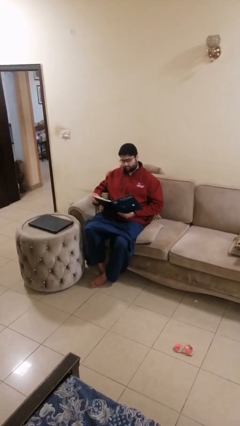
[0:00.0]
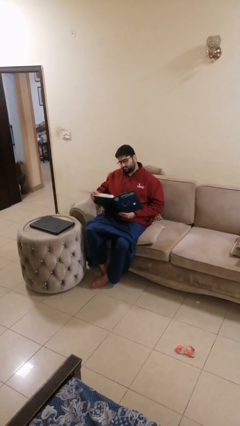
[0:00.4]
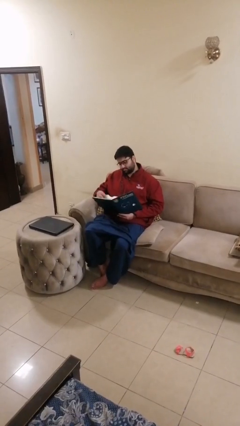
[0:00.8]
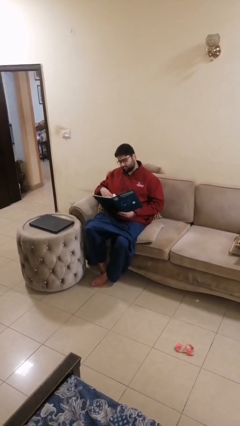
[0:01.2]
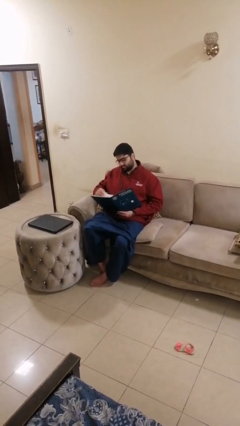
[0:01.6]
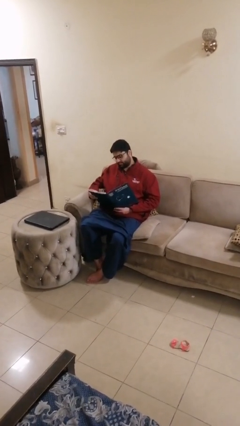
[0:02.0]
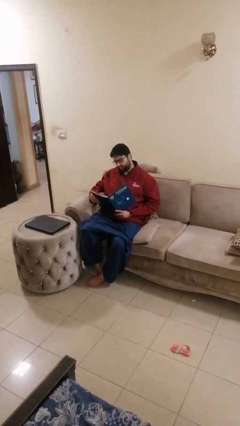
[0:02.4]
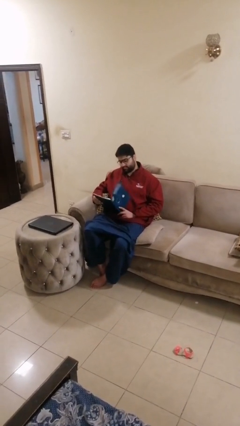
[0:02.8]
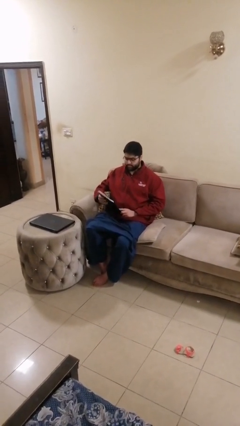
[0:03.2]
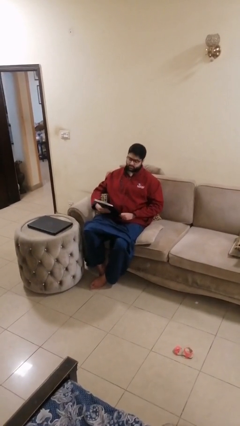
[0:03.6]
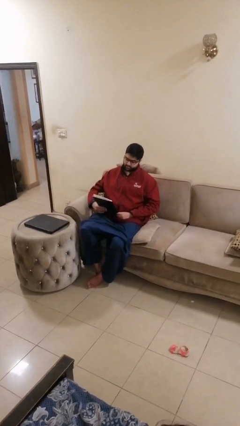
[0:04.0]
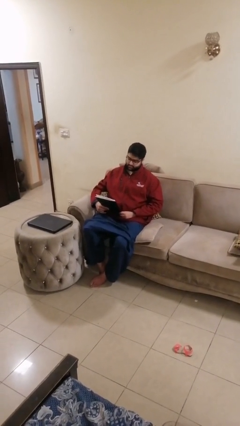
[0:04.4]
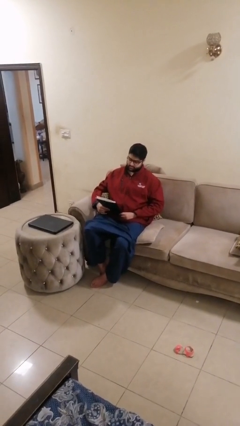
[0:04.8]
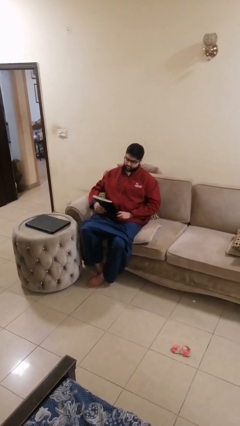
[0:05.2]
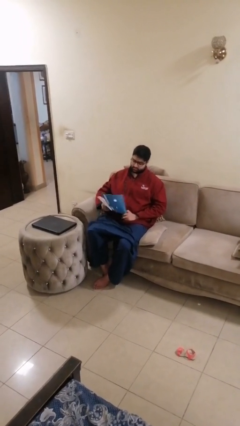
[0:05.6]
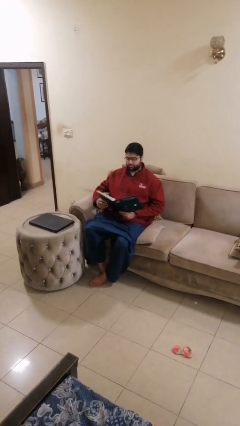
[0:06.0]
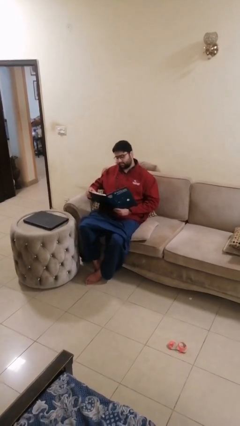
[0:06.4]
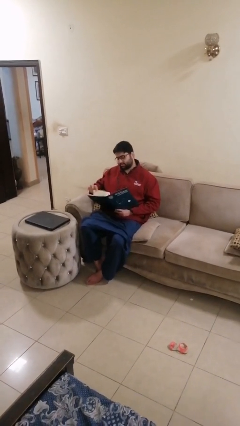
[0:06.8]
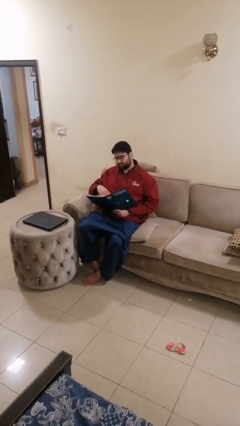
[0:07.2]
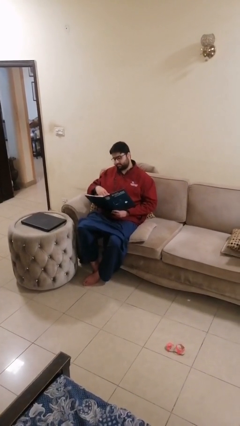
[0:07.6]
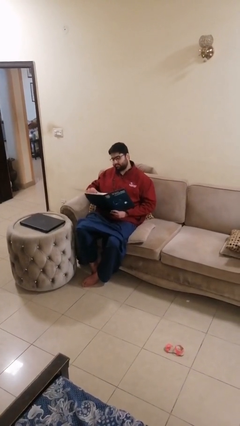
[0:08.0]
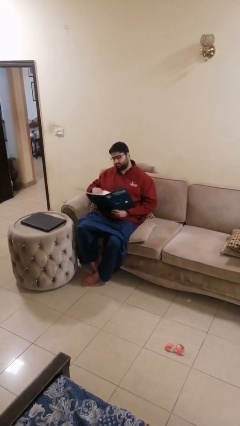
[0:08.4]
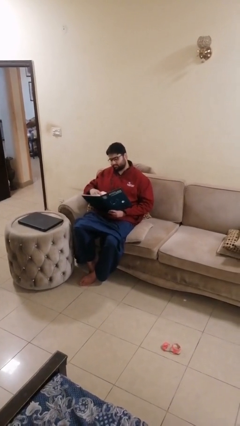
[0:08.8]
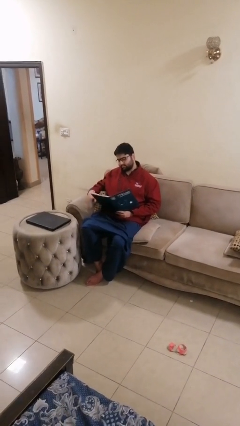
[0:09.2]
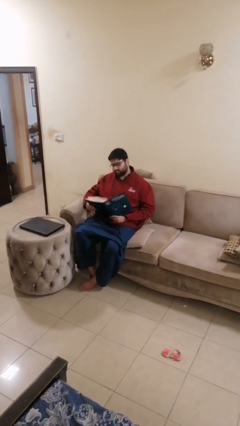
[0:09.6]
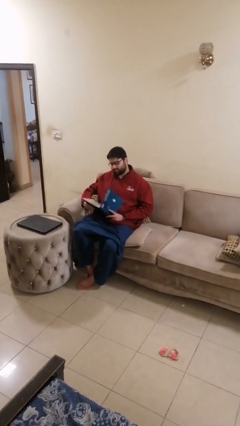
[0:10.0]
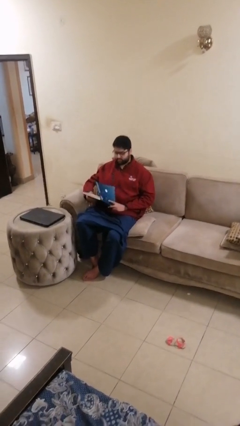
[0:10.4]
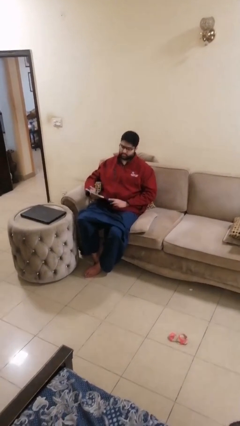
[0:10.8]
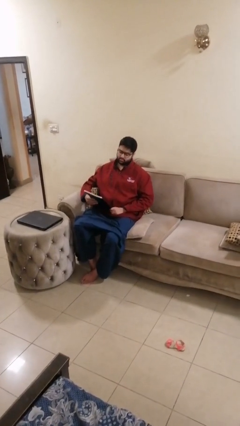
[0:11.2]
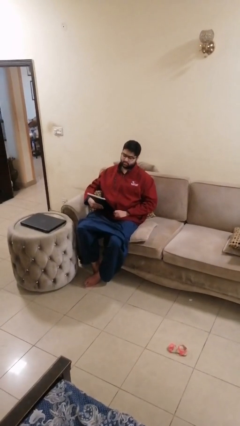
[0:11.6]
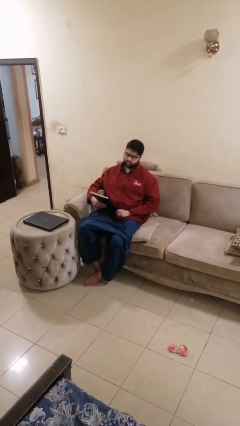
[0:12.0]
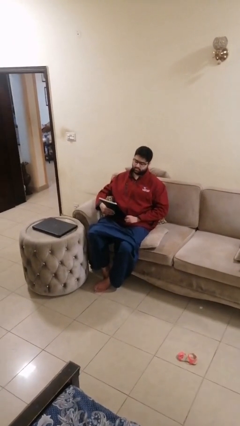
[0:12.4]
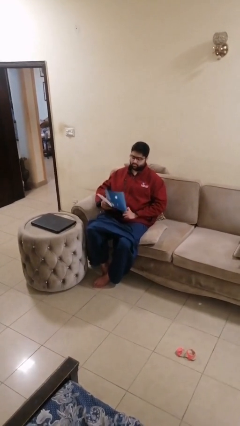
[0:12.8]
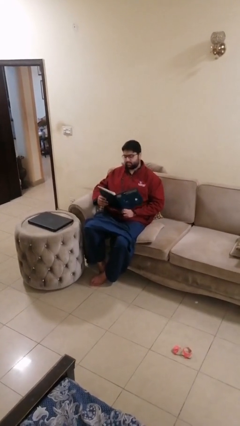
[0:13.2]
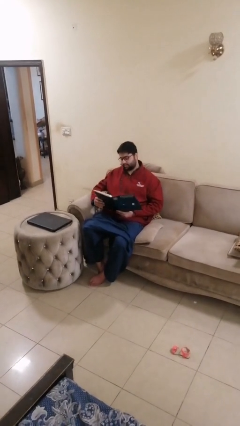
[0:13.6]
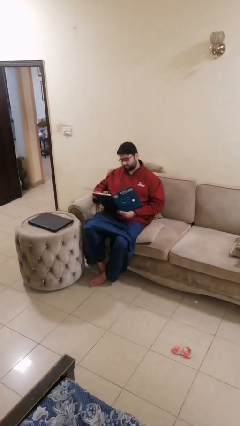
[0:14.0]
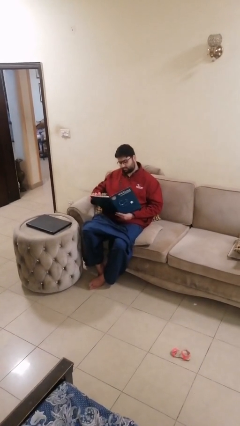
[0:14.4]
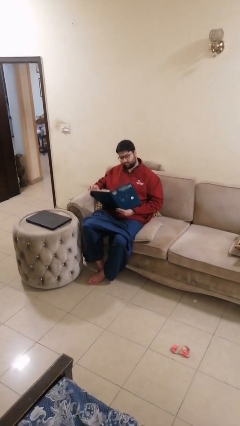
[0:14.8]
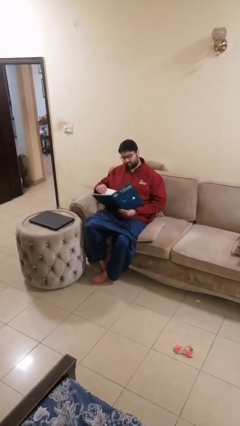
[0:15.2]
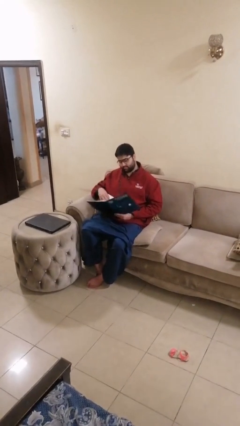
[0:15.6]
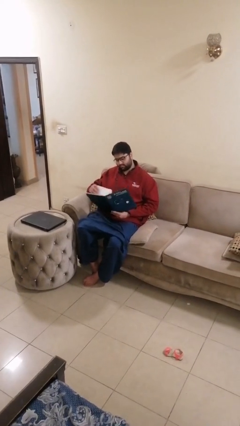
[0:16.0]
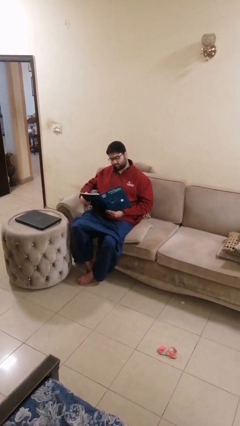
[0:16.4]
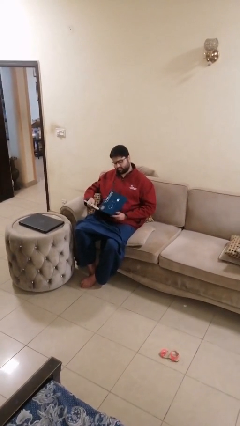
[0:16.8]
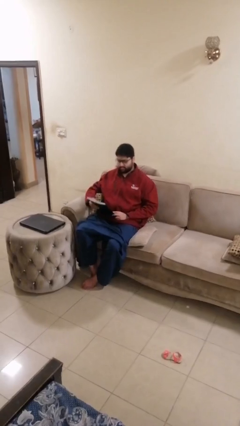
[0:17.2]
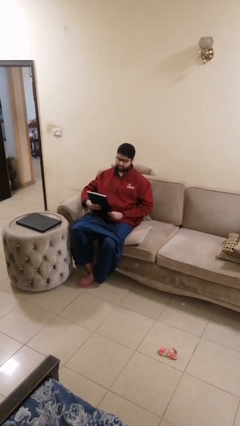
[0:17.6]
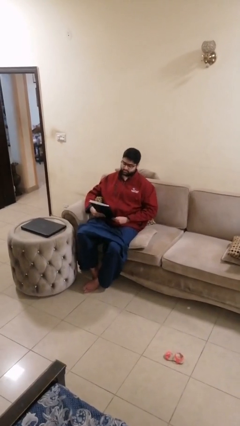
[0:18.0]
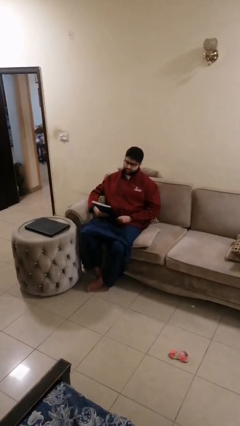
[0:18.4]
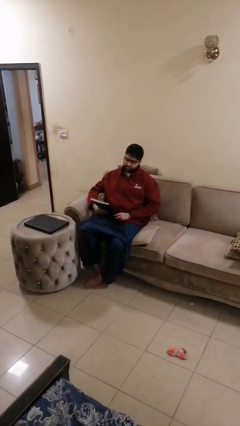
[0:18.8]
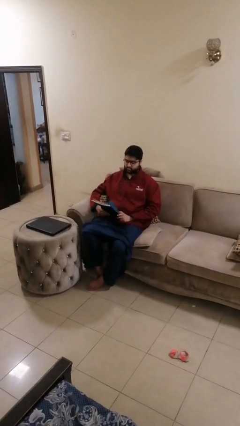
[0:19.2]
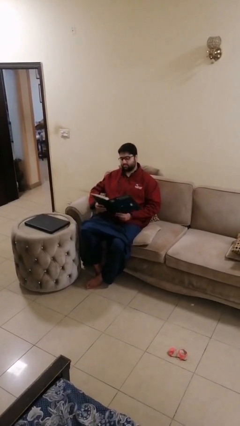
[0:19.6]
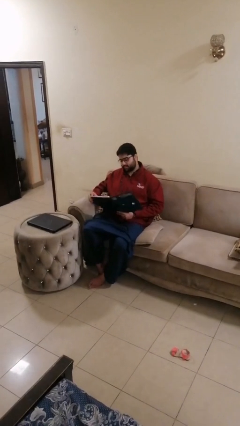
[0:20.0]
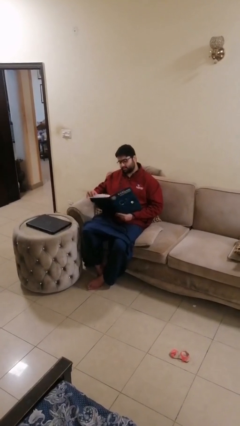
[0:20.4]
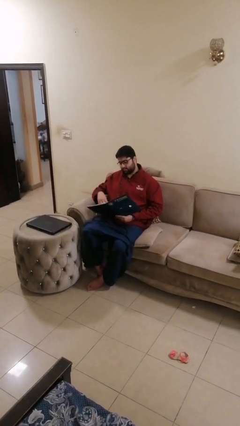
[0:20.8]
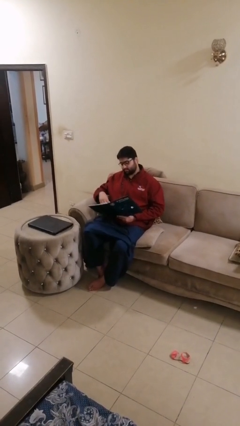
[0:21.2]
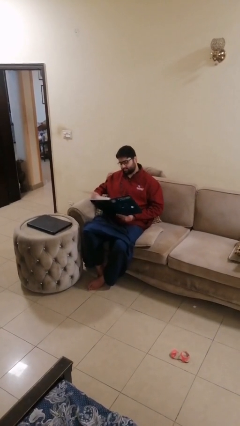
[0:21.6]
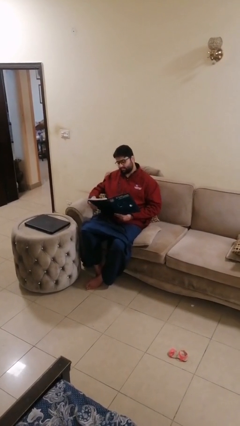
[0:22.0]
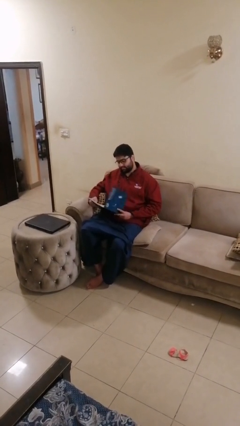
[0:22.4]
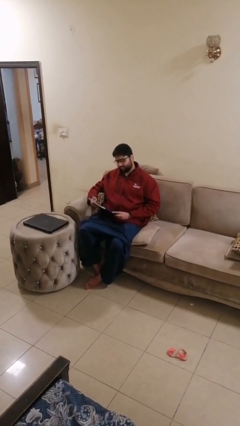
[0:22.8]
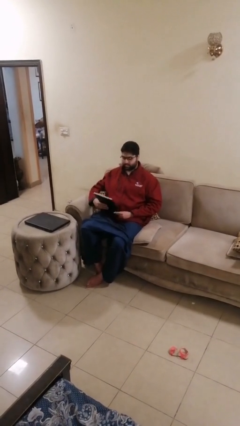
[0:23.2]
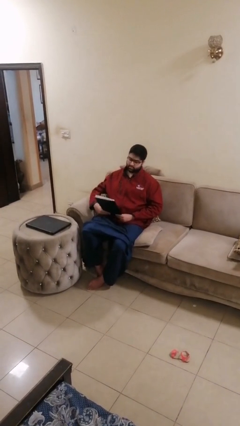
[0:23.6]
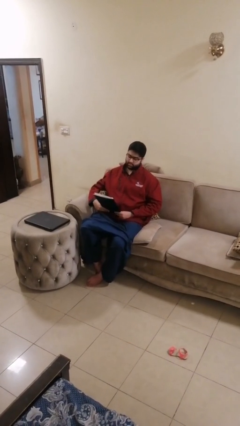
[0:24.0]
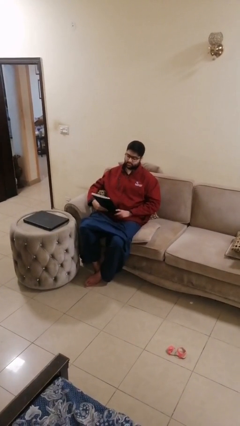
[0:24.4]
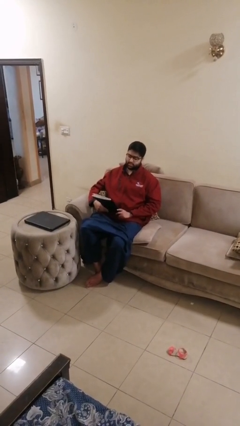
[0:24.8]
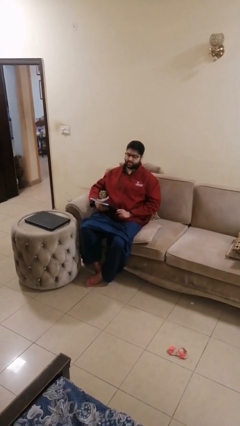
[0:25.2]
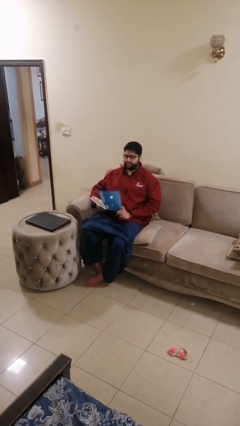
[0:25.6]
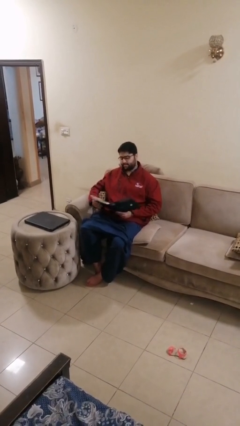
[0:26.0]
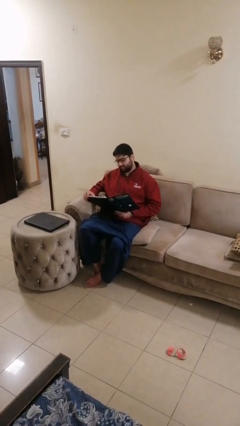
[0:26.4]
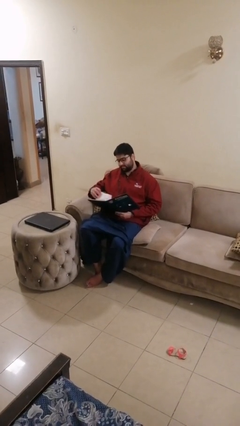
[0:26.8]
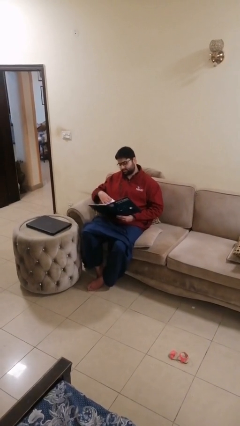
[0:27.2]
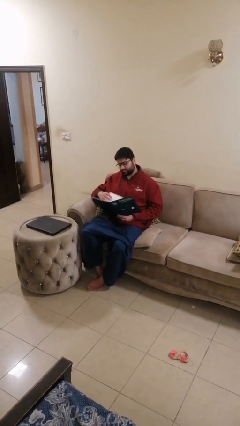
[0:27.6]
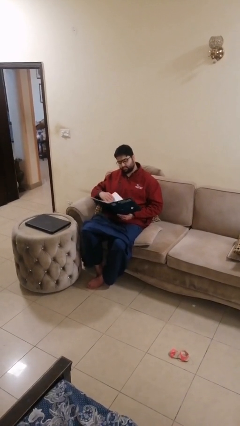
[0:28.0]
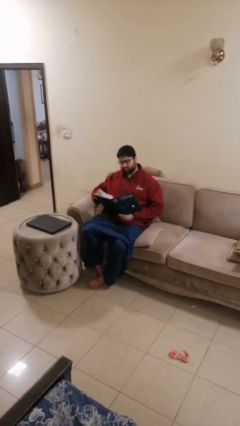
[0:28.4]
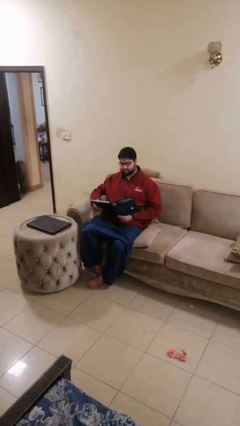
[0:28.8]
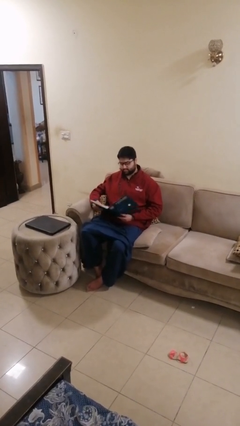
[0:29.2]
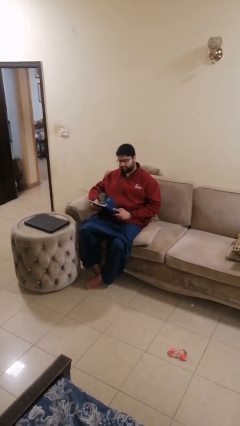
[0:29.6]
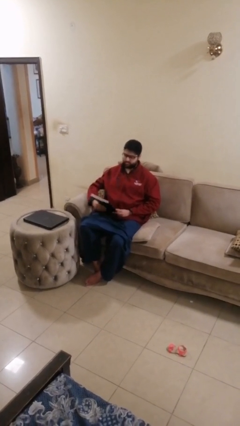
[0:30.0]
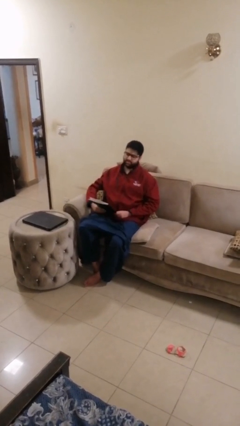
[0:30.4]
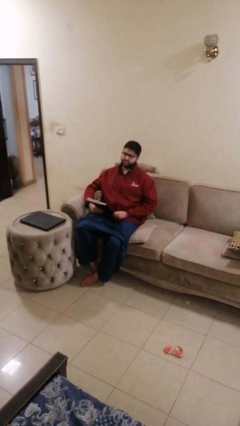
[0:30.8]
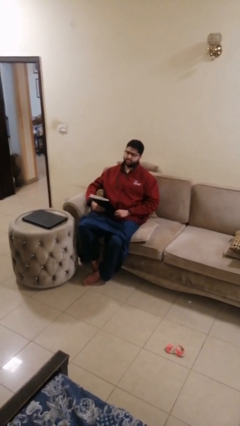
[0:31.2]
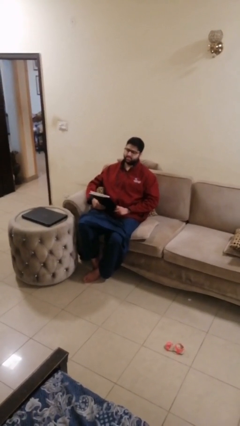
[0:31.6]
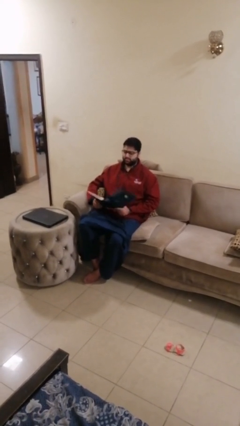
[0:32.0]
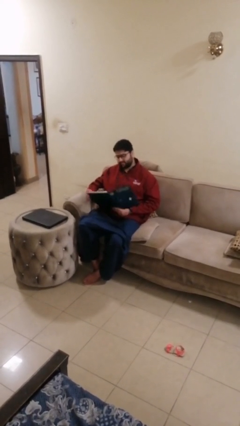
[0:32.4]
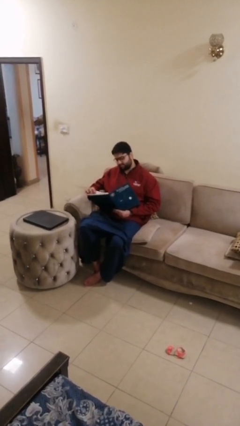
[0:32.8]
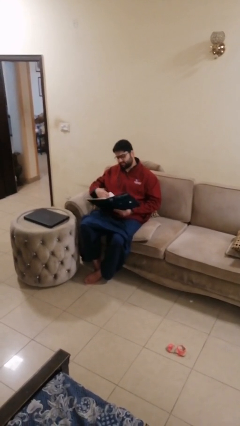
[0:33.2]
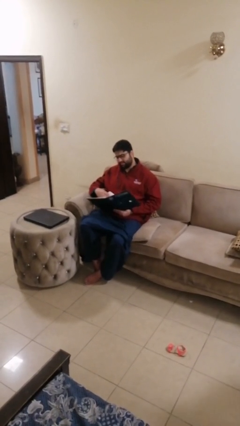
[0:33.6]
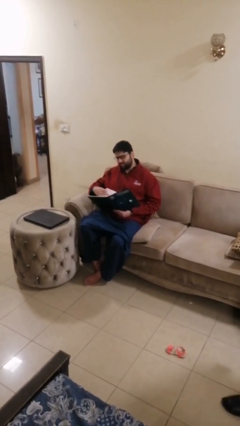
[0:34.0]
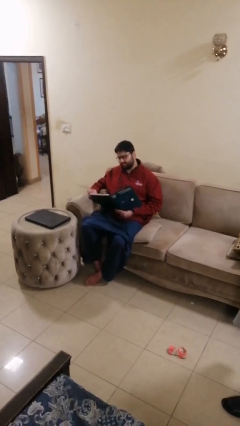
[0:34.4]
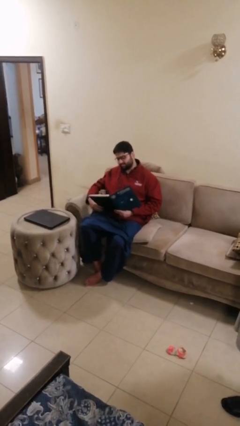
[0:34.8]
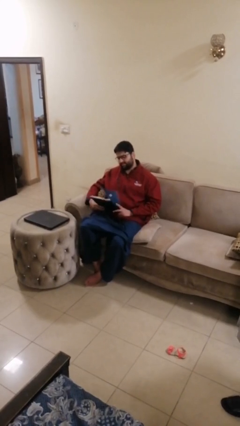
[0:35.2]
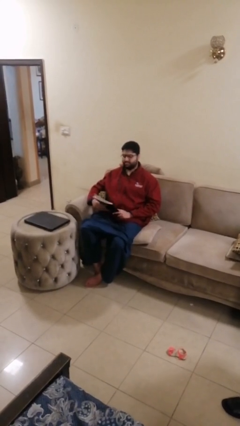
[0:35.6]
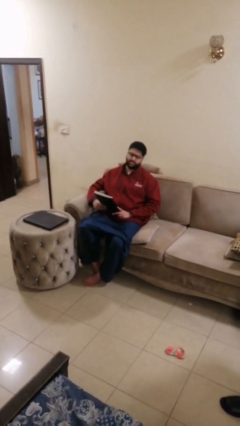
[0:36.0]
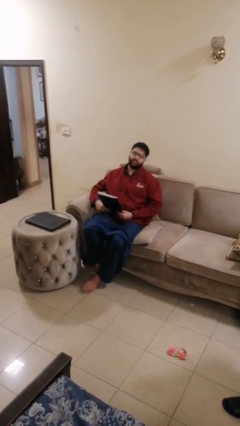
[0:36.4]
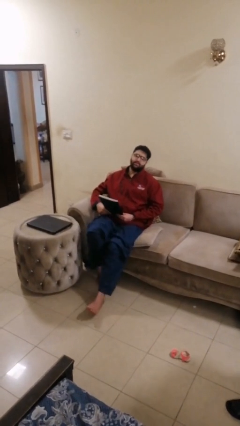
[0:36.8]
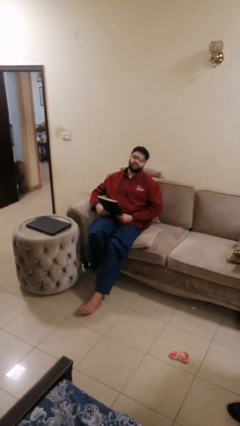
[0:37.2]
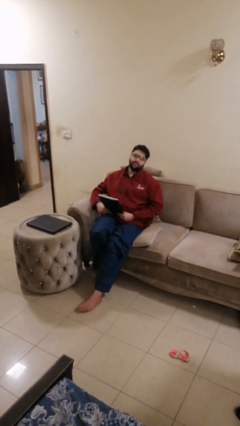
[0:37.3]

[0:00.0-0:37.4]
person reads document
